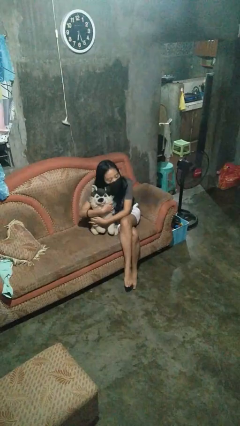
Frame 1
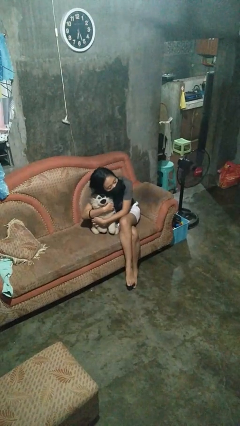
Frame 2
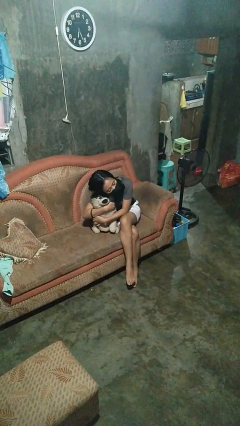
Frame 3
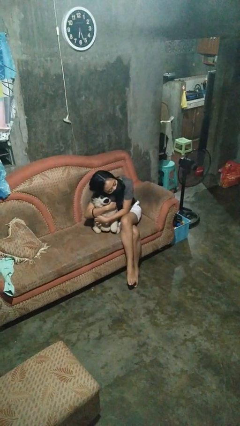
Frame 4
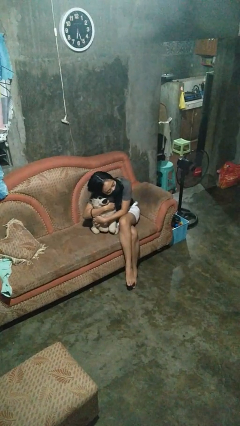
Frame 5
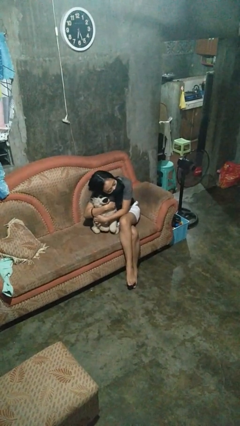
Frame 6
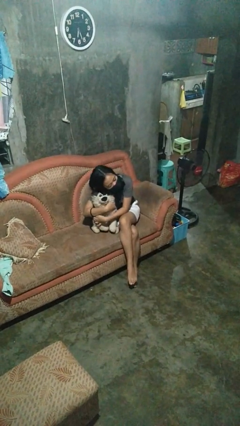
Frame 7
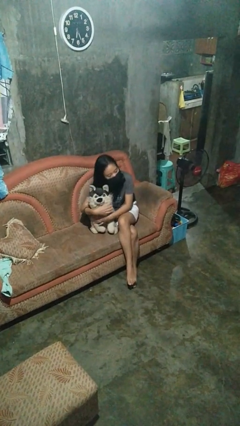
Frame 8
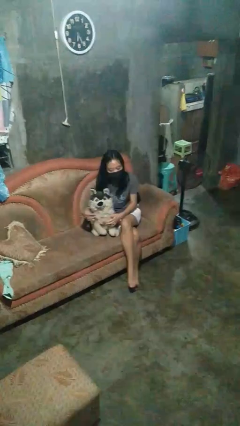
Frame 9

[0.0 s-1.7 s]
person hugs stuffed animal

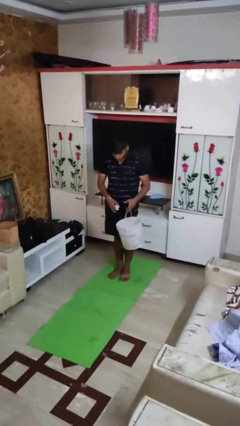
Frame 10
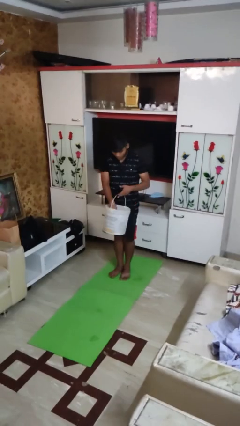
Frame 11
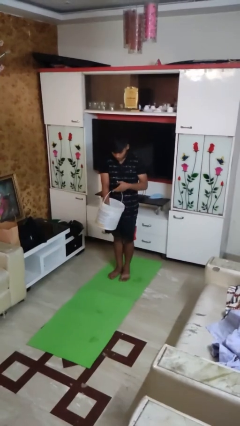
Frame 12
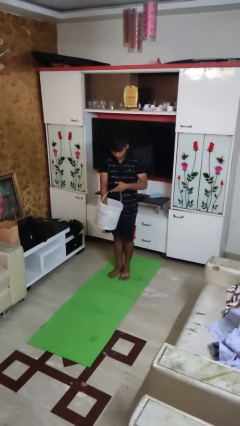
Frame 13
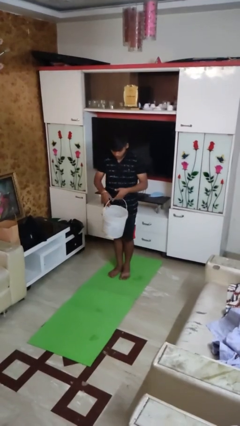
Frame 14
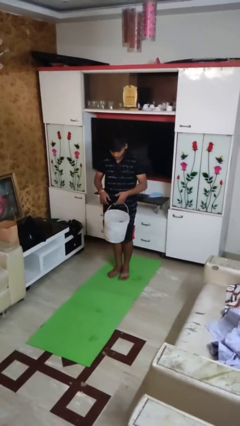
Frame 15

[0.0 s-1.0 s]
person puts object into basket

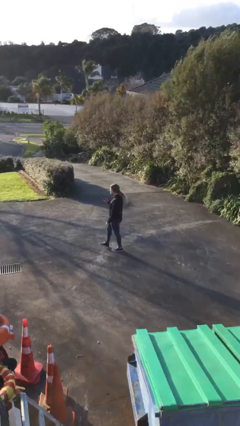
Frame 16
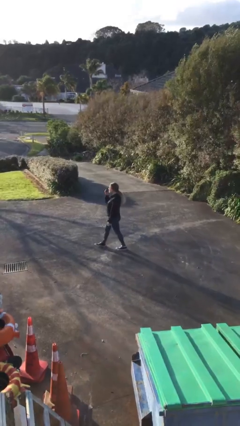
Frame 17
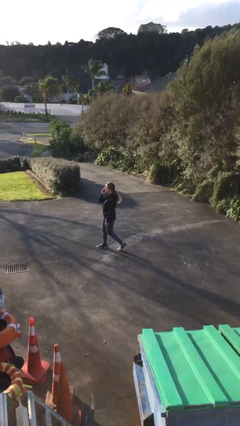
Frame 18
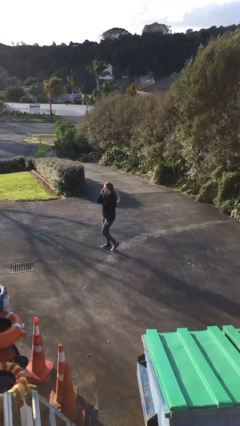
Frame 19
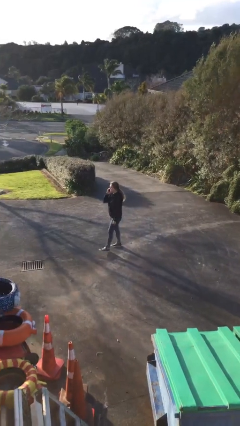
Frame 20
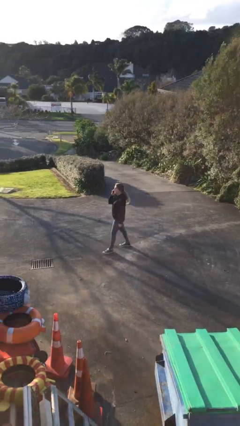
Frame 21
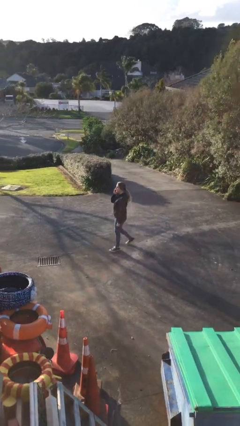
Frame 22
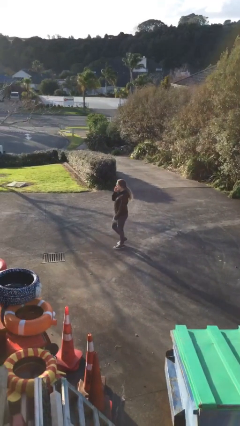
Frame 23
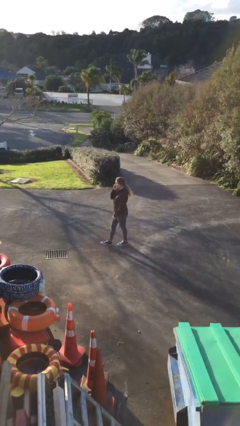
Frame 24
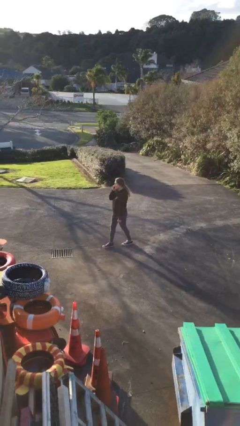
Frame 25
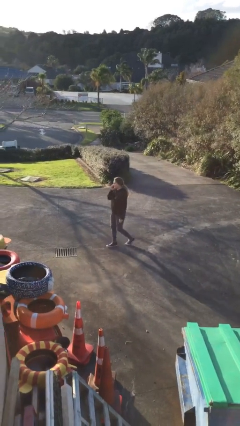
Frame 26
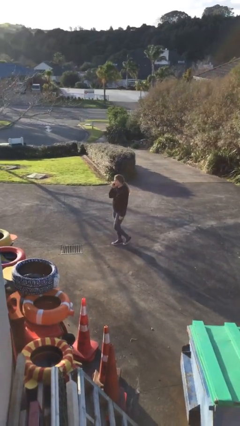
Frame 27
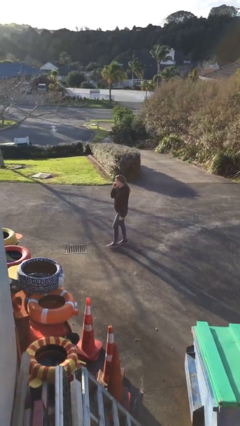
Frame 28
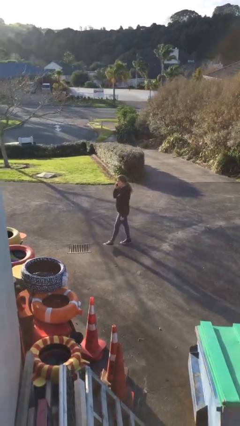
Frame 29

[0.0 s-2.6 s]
person talks on phone

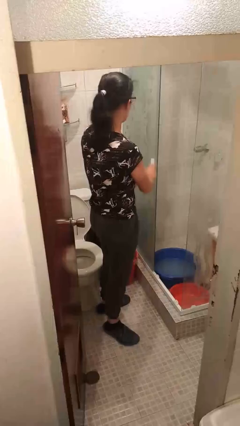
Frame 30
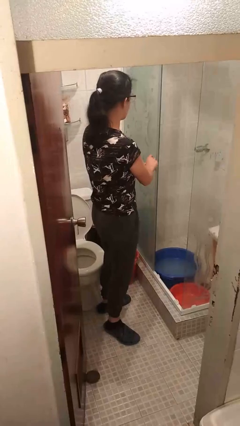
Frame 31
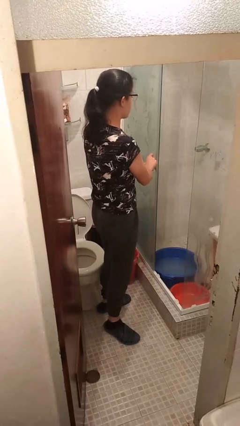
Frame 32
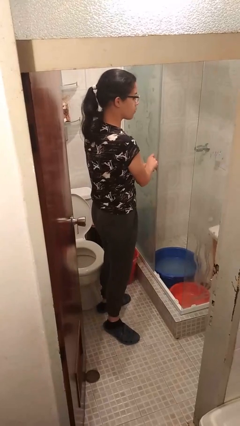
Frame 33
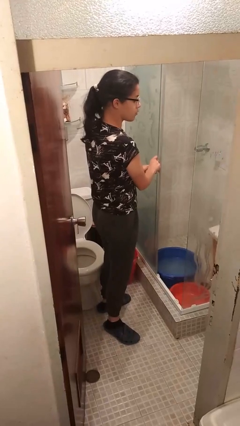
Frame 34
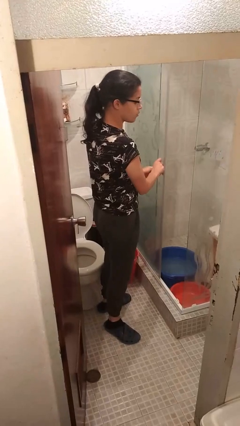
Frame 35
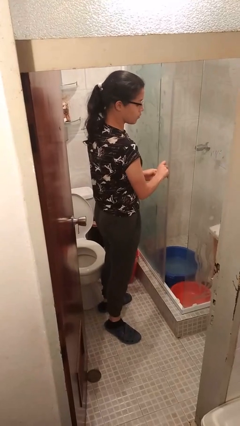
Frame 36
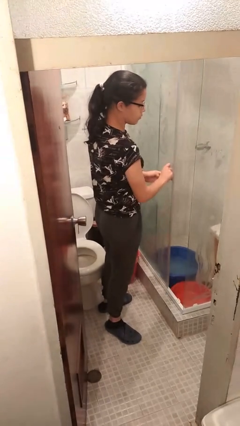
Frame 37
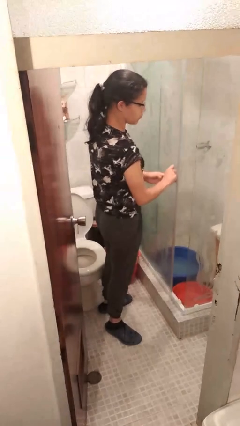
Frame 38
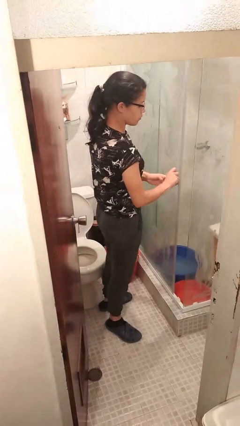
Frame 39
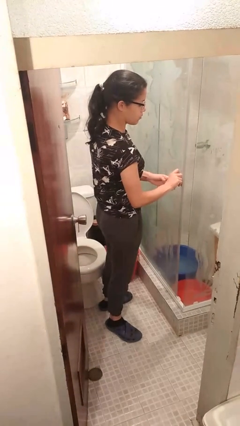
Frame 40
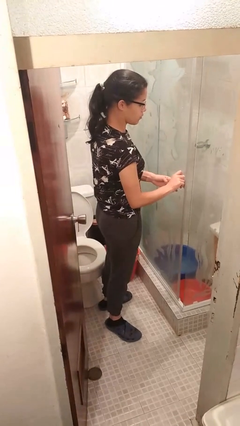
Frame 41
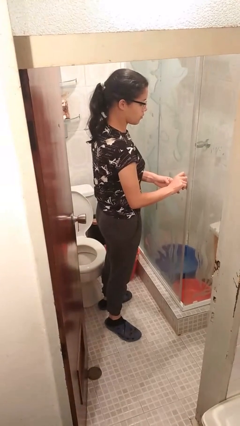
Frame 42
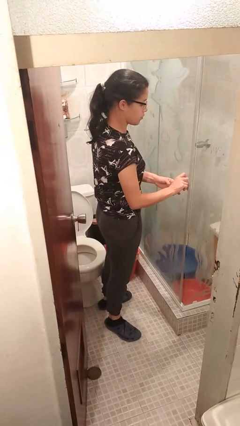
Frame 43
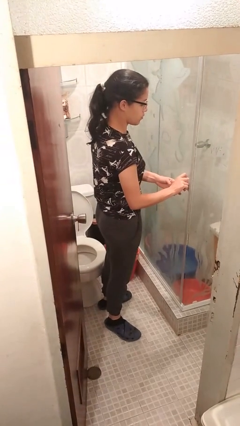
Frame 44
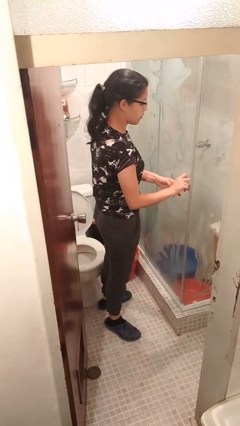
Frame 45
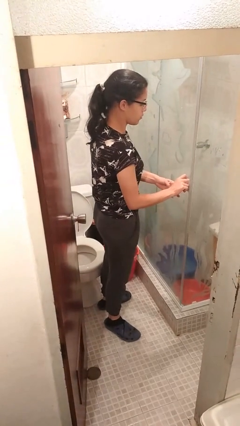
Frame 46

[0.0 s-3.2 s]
person closes sliding door

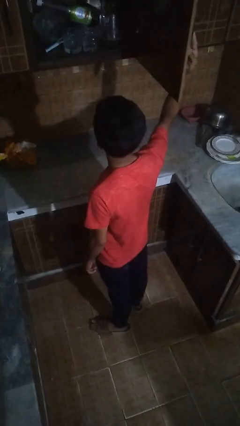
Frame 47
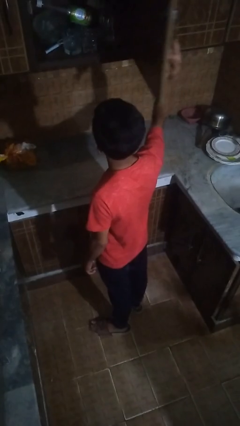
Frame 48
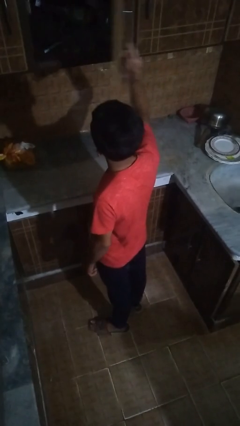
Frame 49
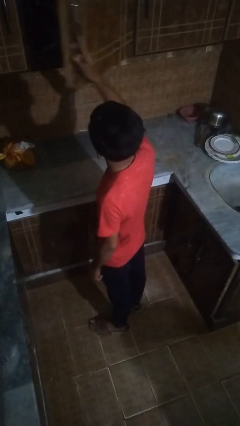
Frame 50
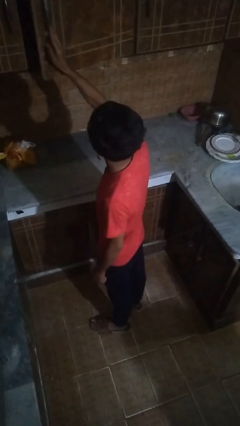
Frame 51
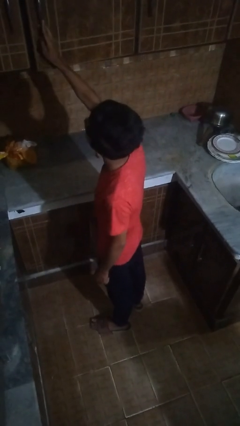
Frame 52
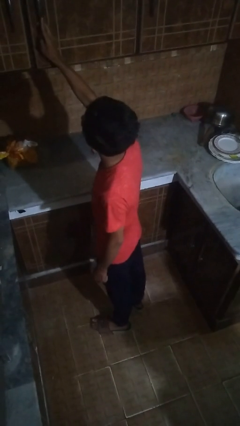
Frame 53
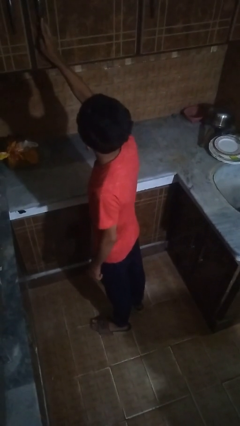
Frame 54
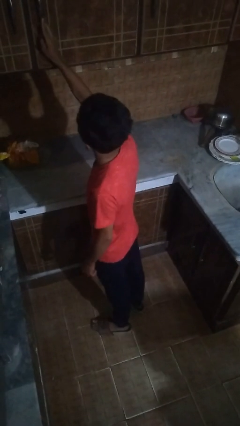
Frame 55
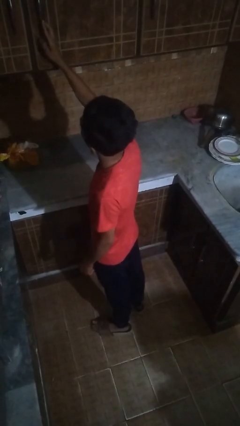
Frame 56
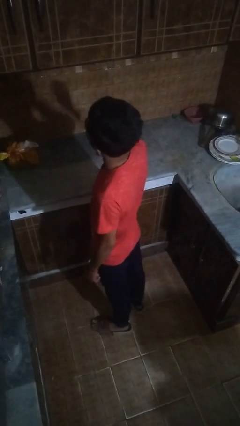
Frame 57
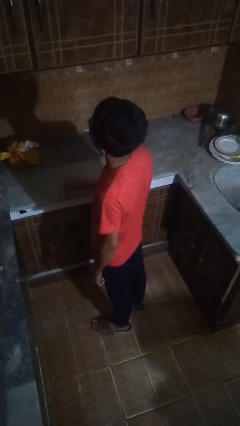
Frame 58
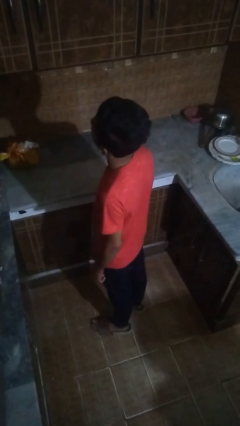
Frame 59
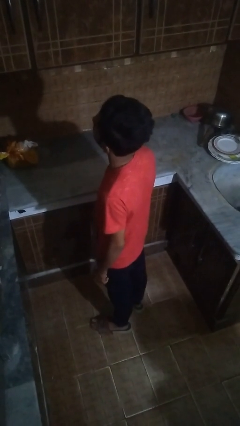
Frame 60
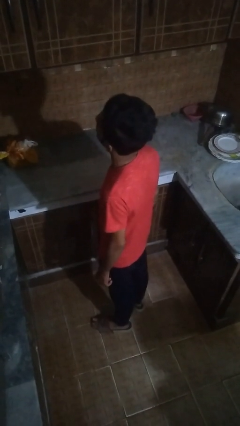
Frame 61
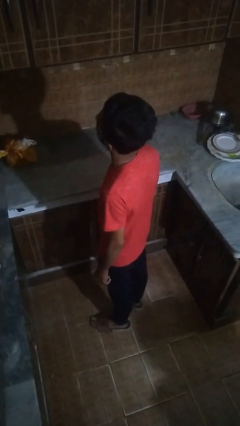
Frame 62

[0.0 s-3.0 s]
person closes cabinet

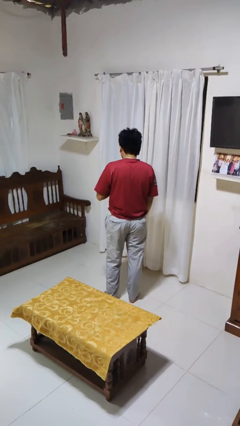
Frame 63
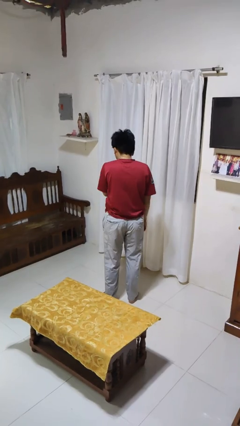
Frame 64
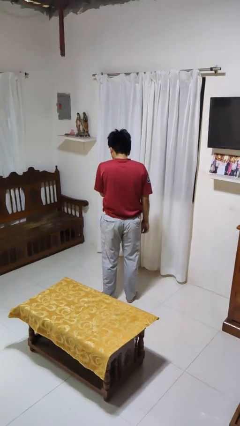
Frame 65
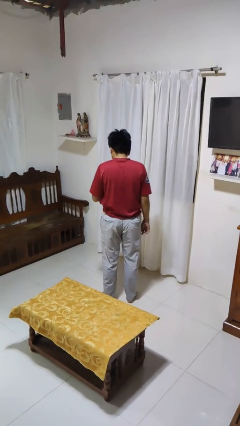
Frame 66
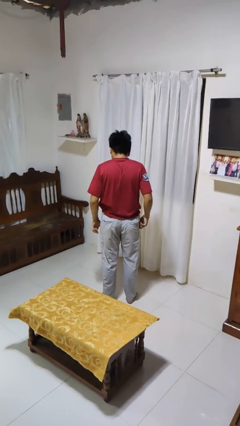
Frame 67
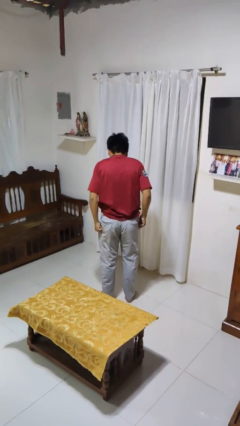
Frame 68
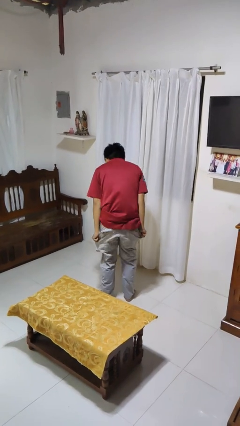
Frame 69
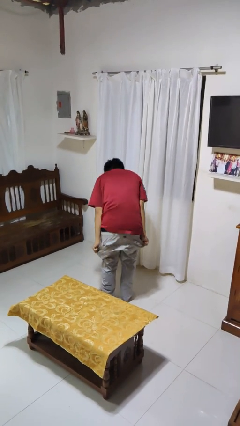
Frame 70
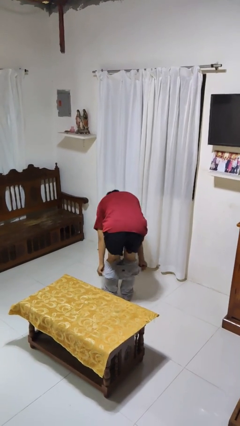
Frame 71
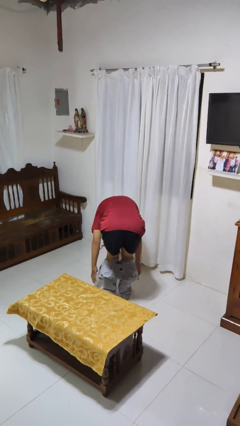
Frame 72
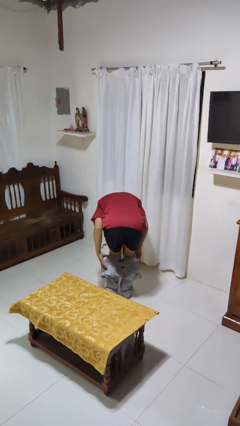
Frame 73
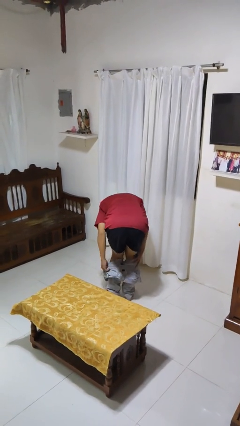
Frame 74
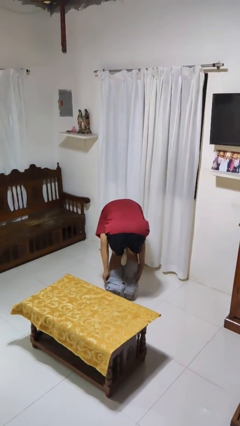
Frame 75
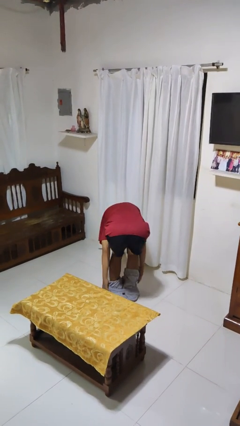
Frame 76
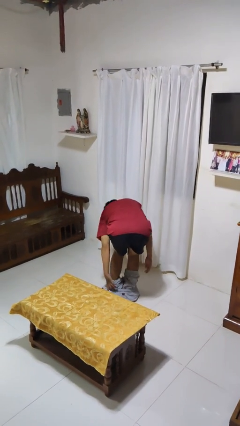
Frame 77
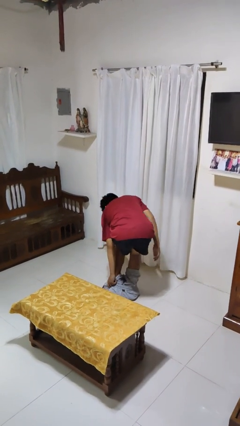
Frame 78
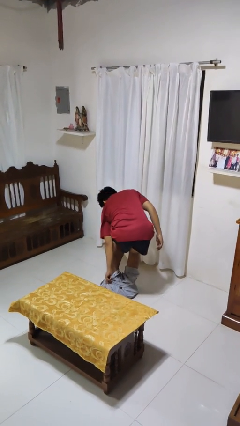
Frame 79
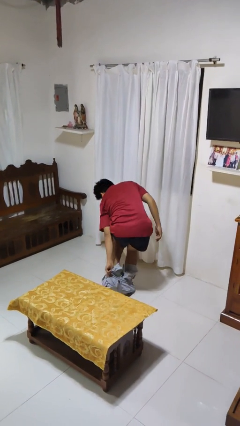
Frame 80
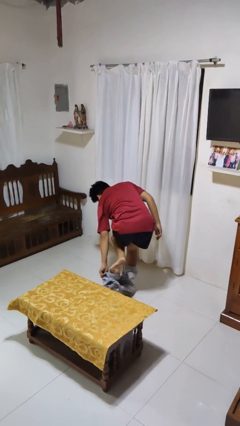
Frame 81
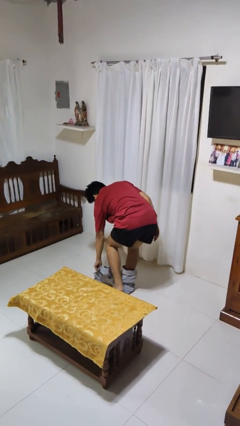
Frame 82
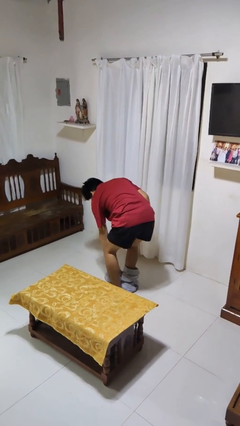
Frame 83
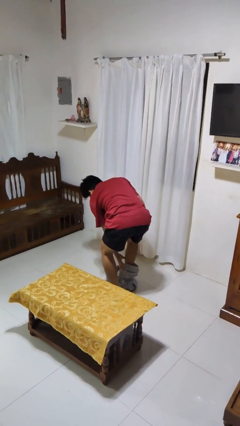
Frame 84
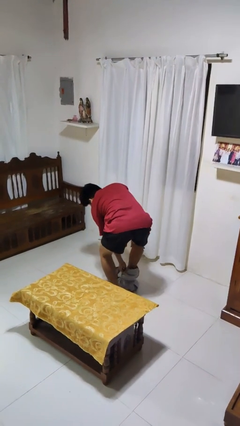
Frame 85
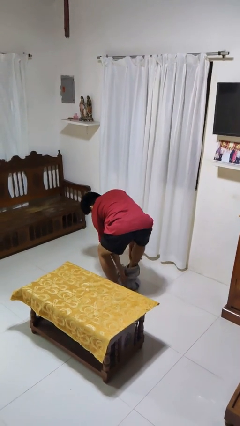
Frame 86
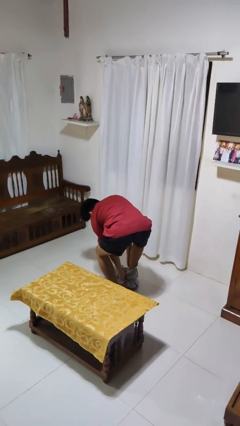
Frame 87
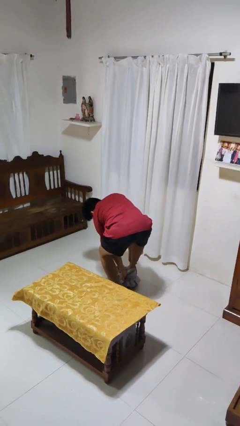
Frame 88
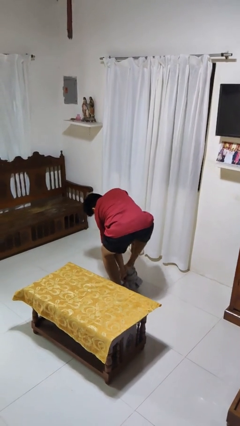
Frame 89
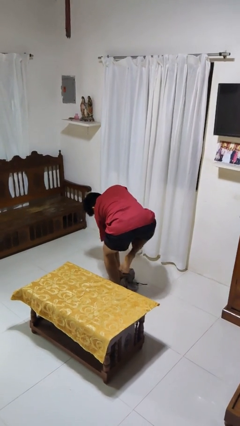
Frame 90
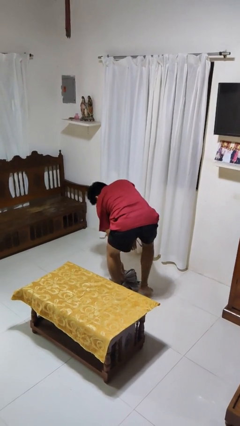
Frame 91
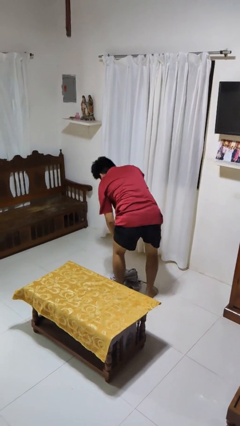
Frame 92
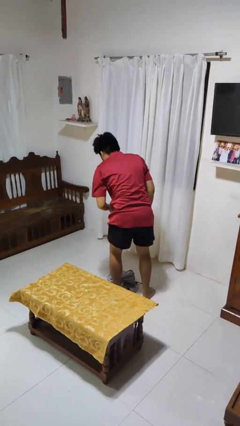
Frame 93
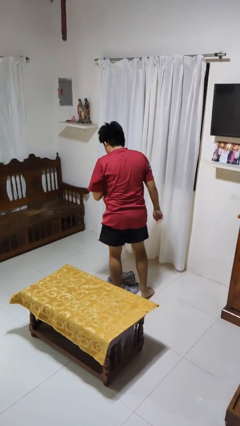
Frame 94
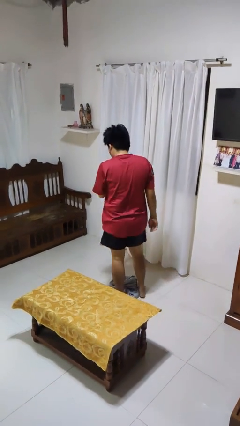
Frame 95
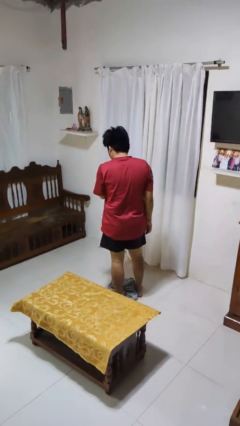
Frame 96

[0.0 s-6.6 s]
person takes off pants
